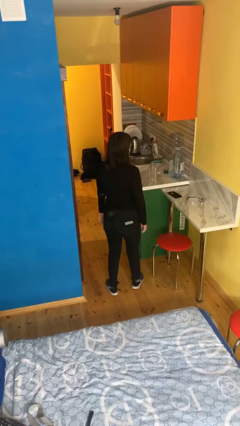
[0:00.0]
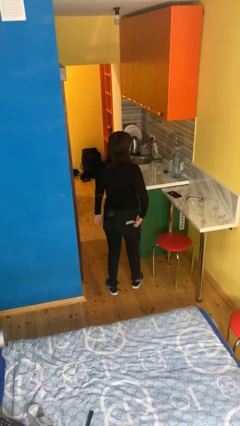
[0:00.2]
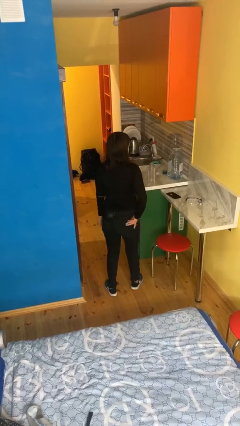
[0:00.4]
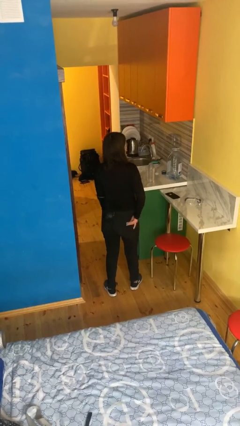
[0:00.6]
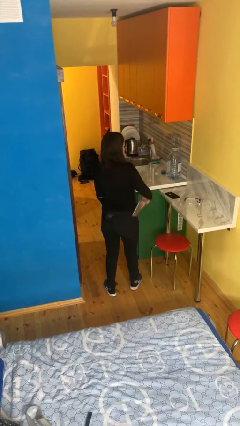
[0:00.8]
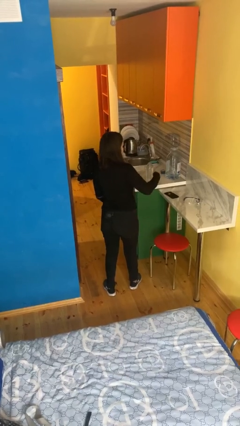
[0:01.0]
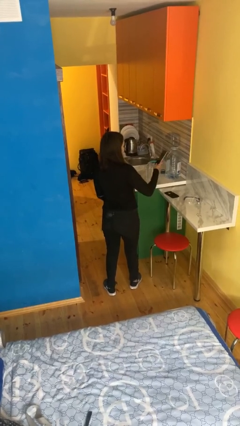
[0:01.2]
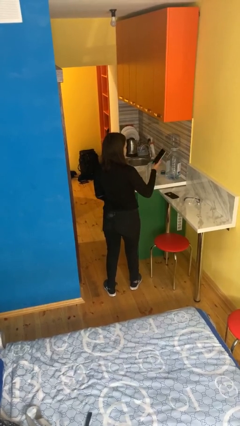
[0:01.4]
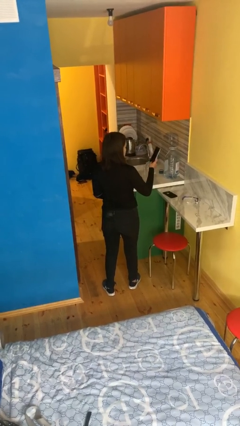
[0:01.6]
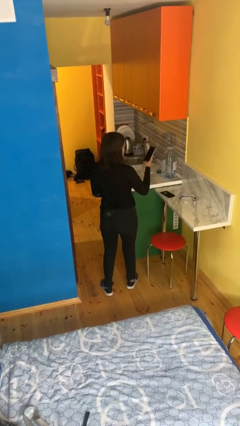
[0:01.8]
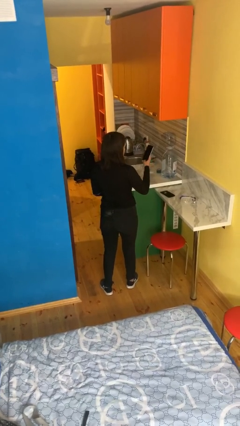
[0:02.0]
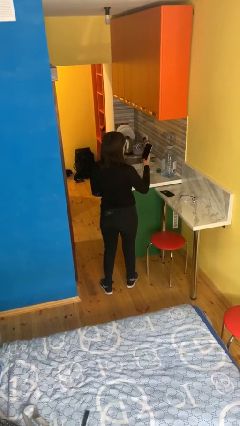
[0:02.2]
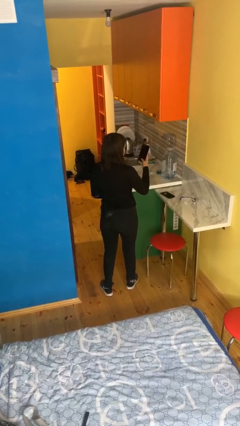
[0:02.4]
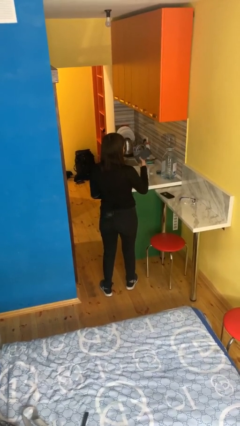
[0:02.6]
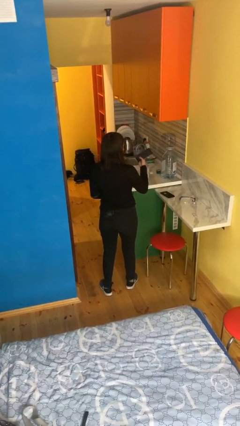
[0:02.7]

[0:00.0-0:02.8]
person takes phone from pocket

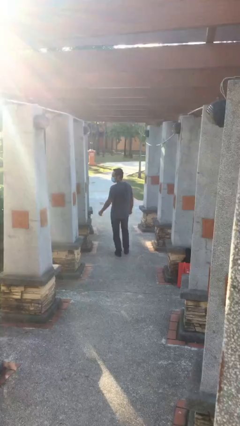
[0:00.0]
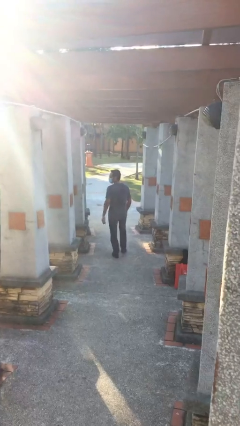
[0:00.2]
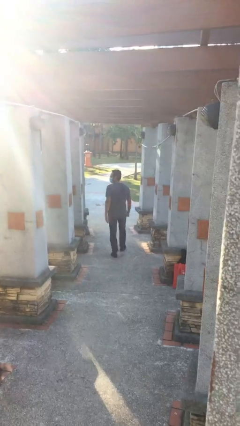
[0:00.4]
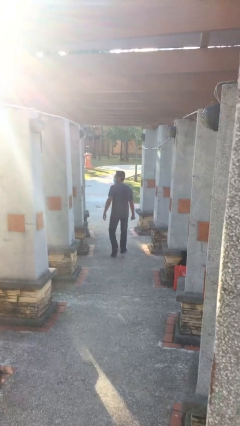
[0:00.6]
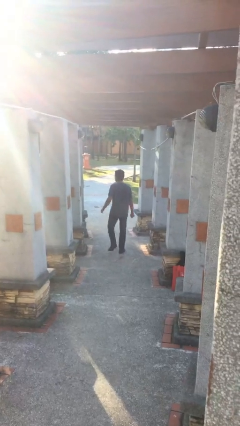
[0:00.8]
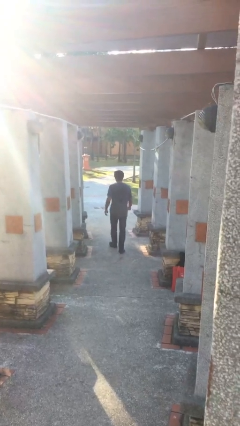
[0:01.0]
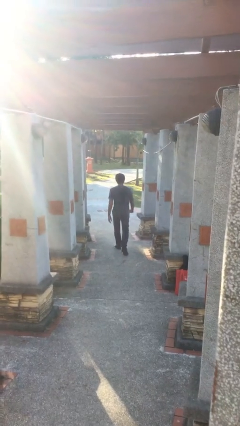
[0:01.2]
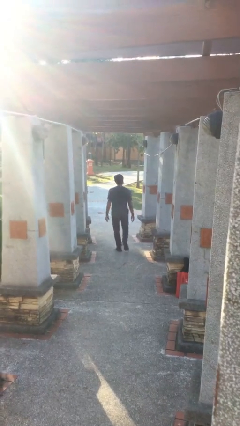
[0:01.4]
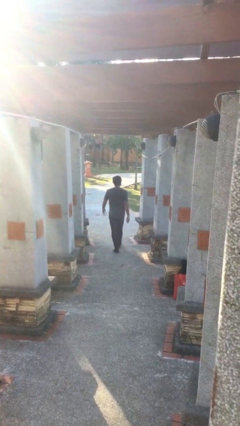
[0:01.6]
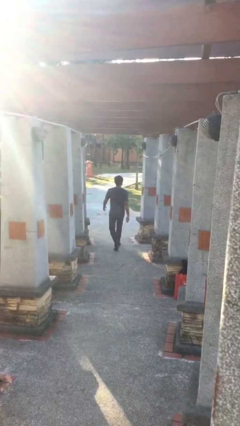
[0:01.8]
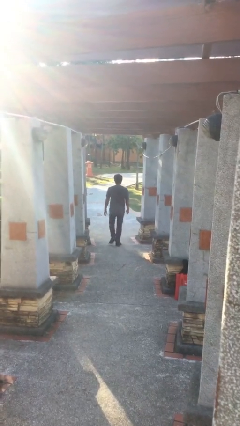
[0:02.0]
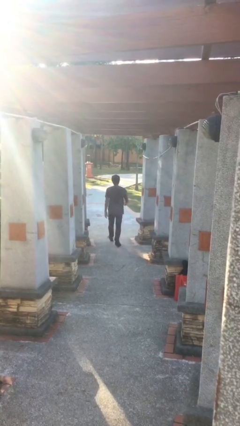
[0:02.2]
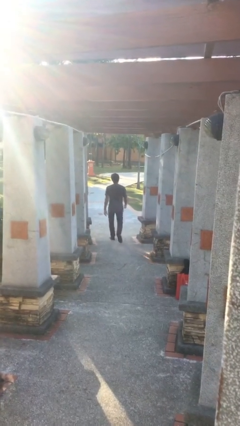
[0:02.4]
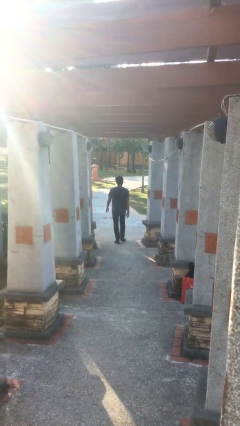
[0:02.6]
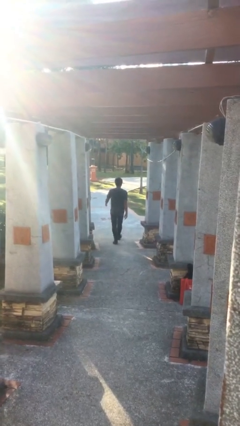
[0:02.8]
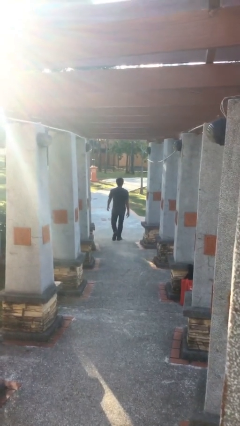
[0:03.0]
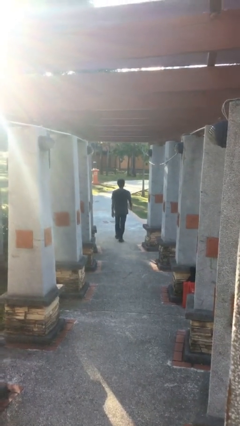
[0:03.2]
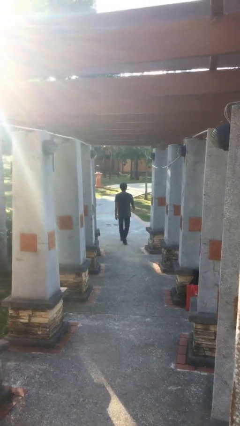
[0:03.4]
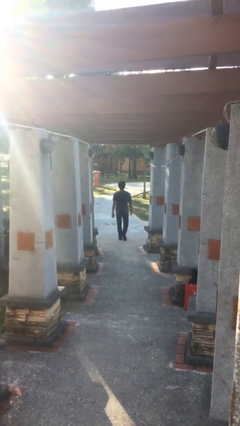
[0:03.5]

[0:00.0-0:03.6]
person exits scene through structure

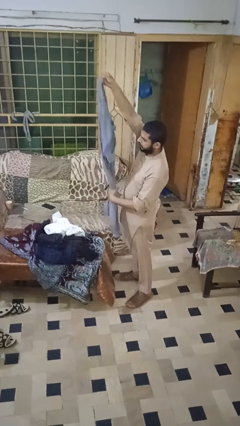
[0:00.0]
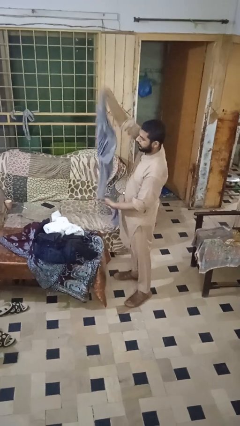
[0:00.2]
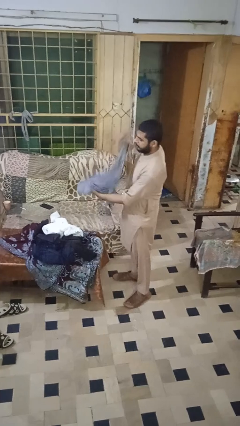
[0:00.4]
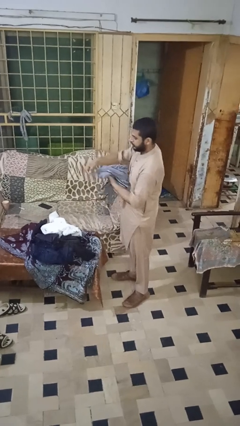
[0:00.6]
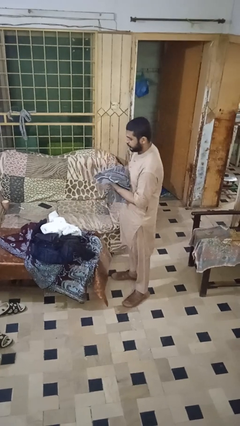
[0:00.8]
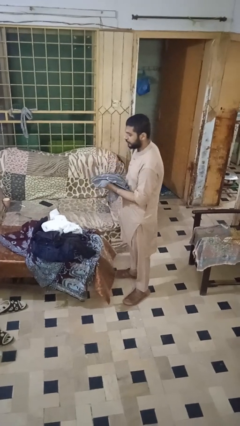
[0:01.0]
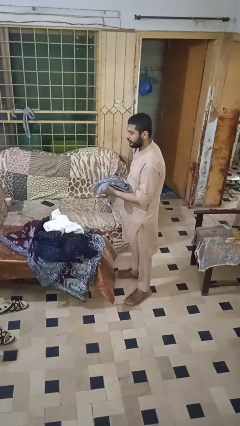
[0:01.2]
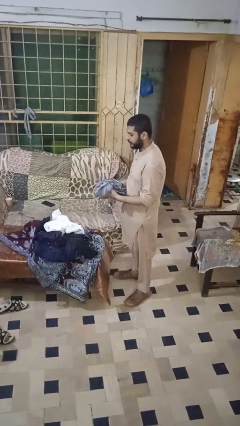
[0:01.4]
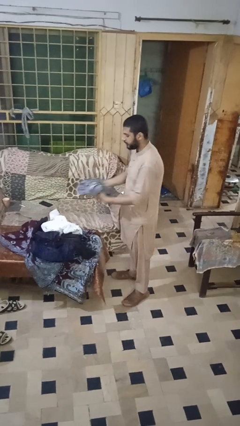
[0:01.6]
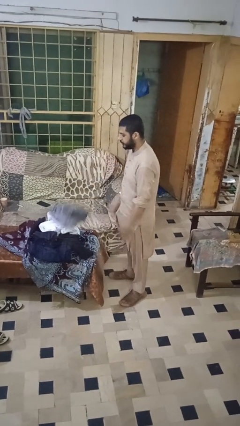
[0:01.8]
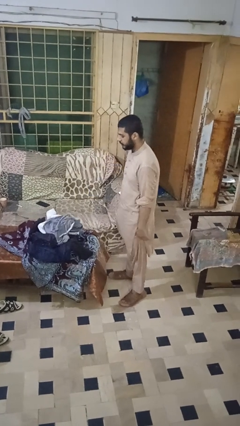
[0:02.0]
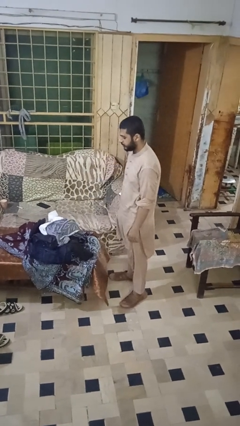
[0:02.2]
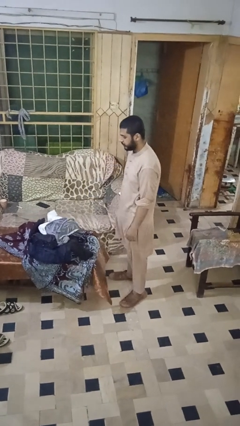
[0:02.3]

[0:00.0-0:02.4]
person folds pants

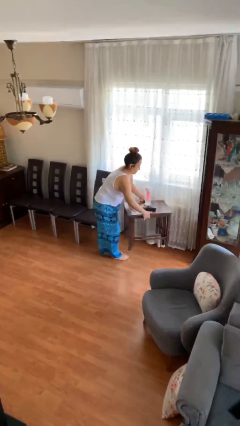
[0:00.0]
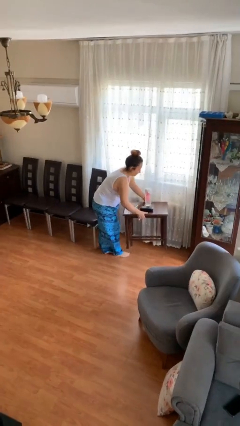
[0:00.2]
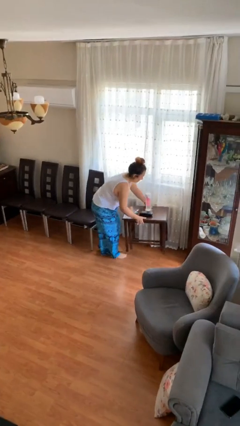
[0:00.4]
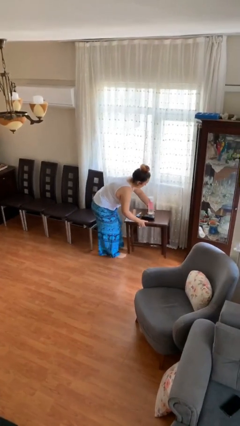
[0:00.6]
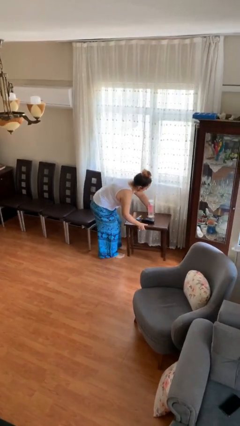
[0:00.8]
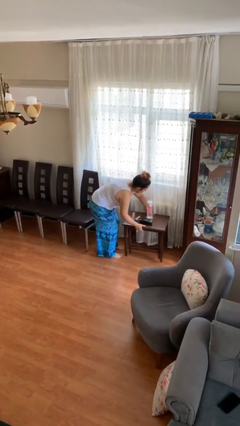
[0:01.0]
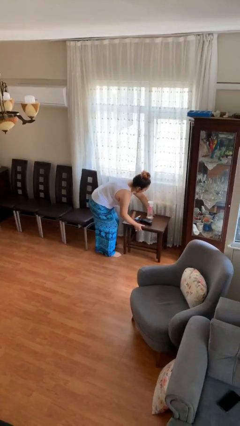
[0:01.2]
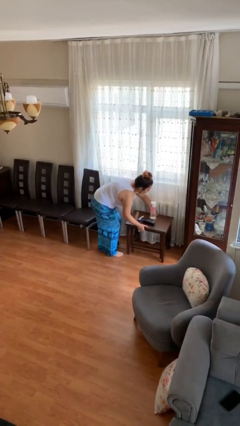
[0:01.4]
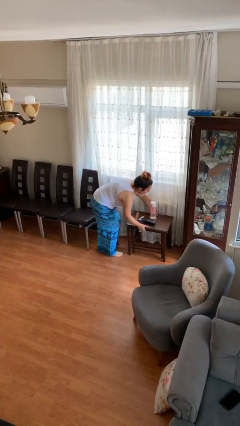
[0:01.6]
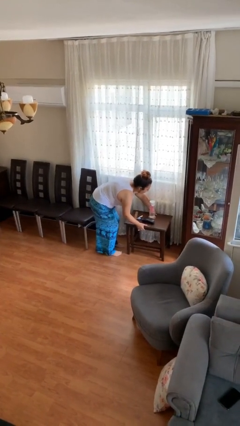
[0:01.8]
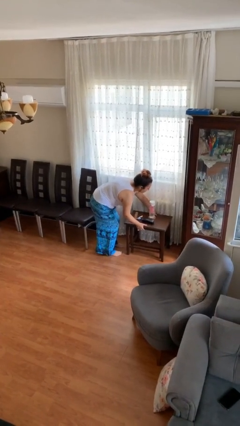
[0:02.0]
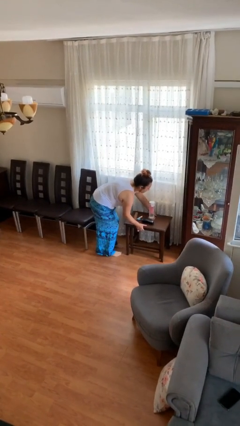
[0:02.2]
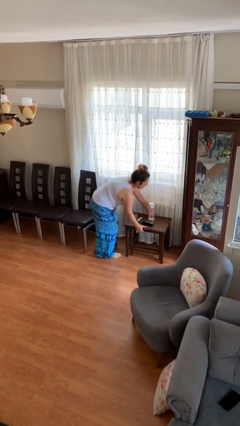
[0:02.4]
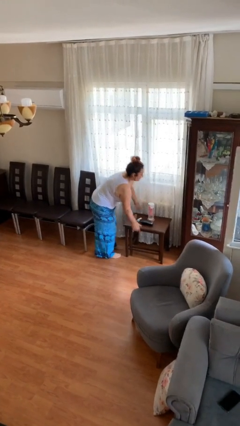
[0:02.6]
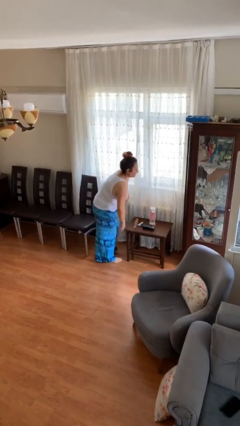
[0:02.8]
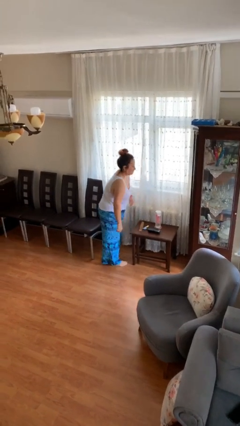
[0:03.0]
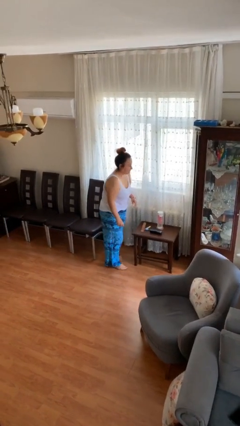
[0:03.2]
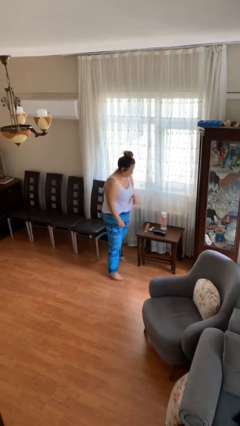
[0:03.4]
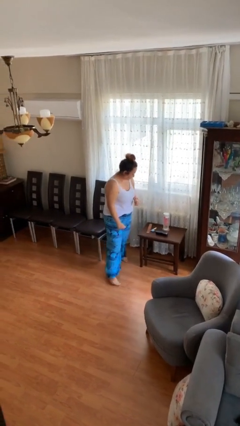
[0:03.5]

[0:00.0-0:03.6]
person puts down object on floor

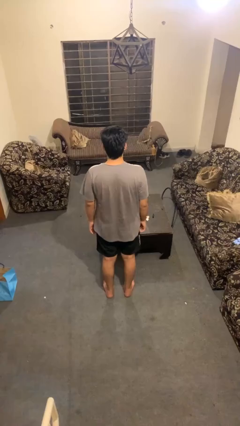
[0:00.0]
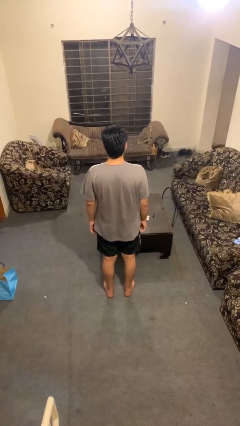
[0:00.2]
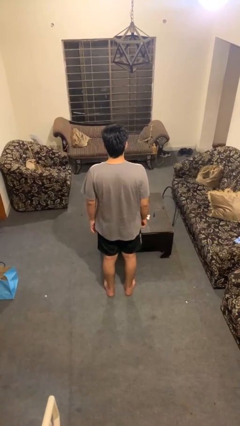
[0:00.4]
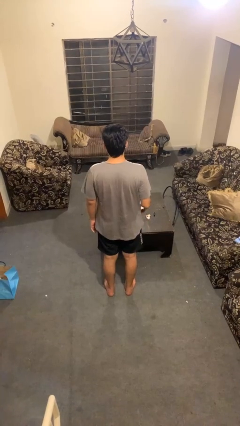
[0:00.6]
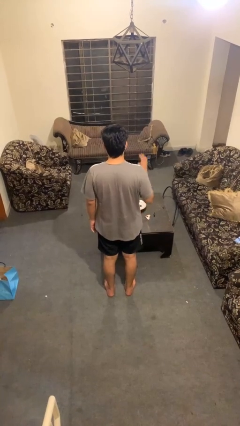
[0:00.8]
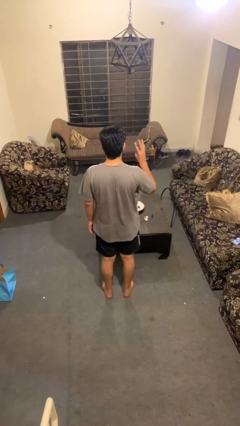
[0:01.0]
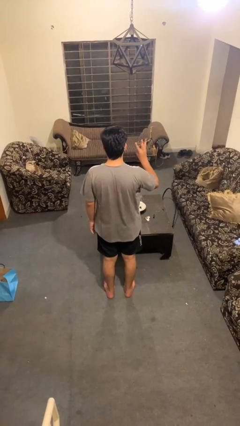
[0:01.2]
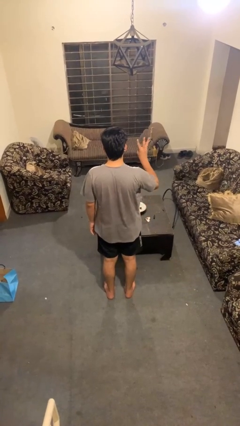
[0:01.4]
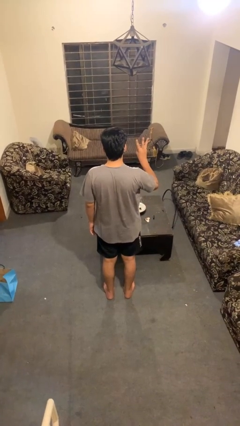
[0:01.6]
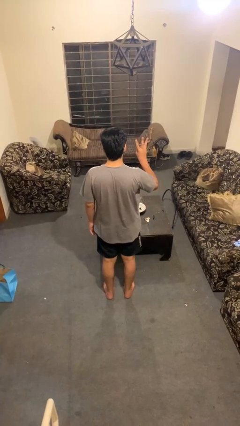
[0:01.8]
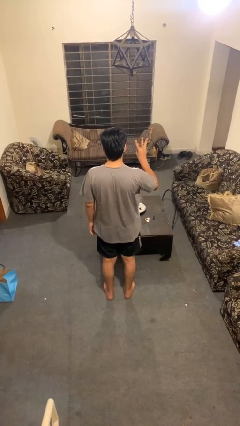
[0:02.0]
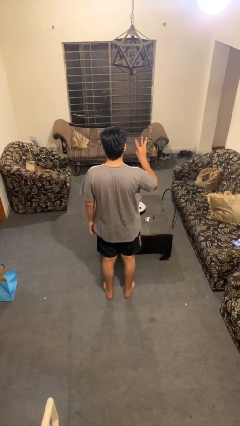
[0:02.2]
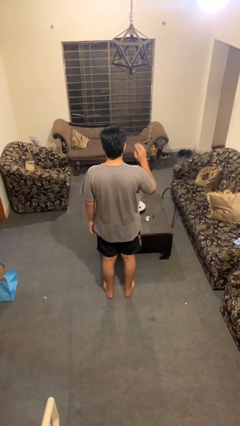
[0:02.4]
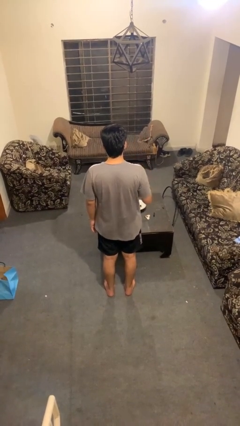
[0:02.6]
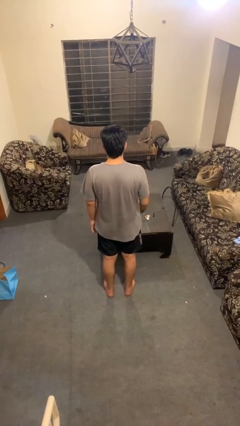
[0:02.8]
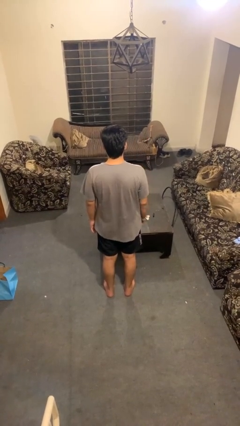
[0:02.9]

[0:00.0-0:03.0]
person gestures number three

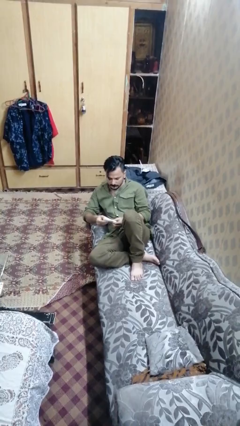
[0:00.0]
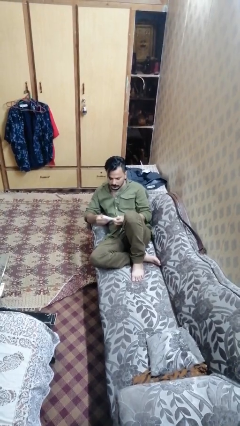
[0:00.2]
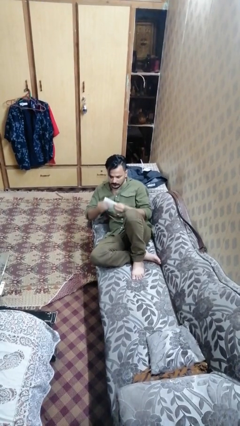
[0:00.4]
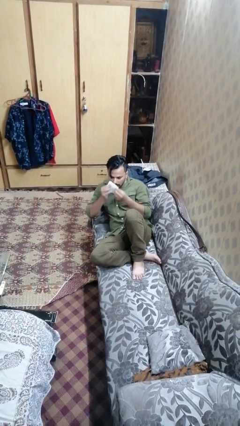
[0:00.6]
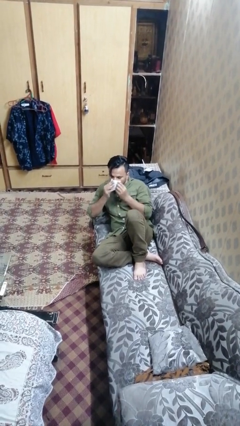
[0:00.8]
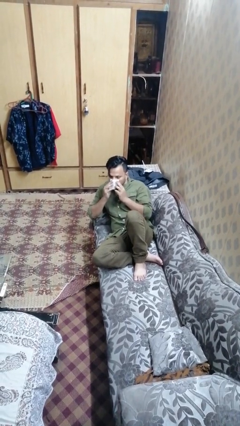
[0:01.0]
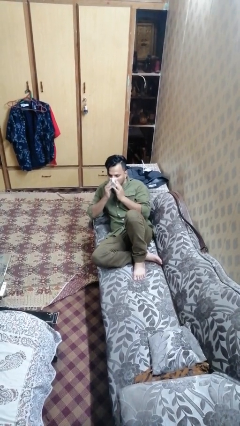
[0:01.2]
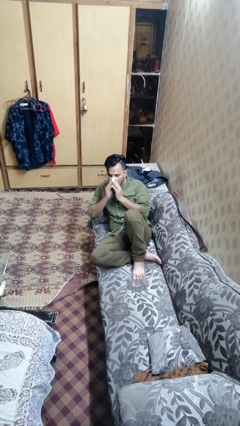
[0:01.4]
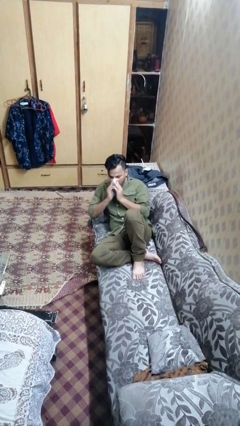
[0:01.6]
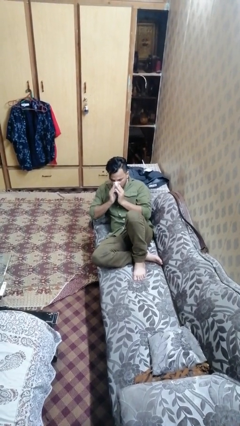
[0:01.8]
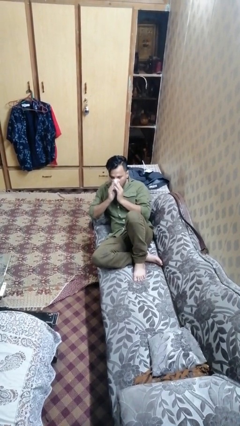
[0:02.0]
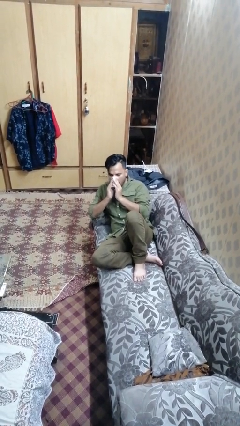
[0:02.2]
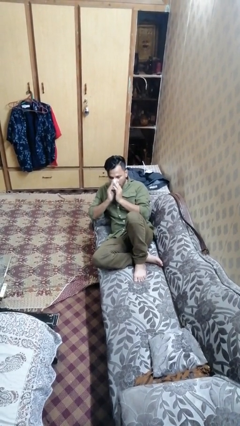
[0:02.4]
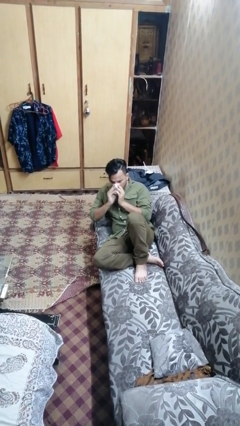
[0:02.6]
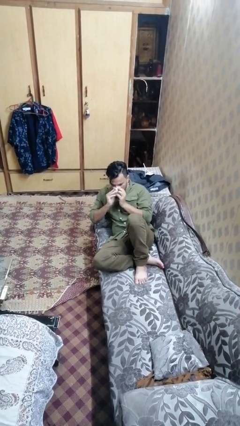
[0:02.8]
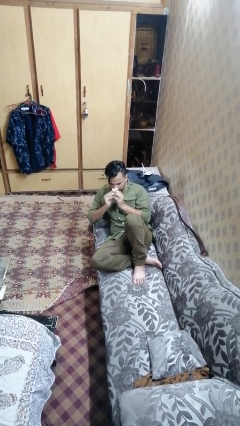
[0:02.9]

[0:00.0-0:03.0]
person blows nose
